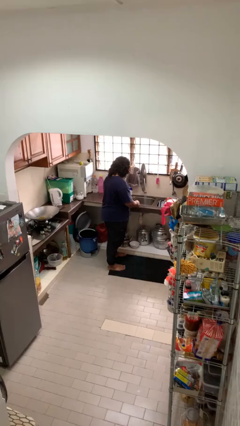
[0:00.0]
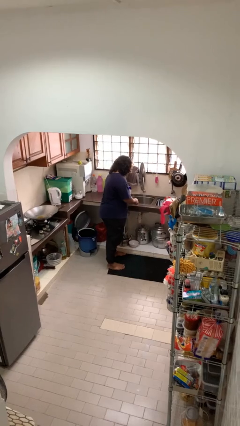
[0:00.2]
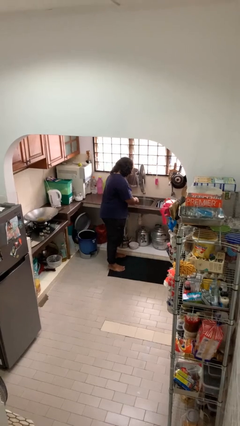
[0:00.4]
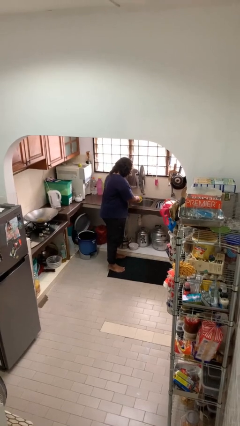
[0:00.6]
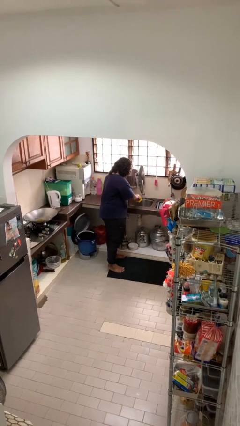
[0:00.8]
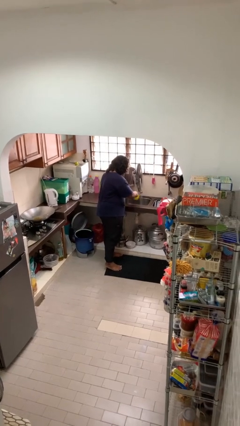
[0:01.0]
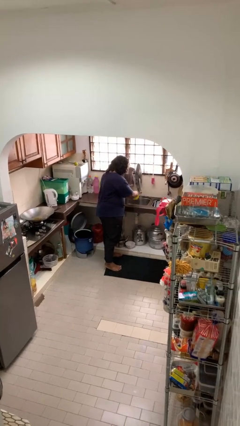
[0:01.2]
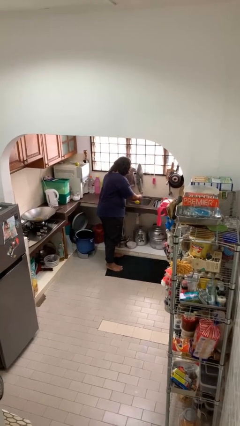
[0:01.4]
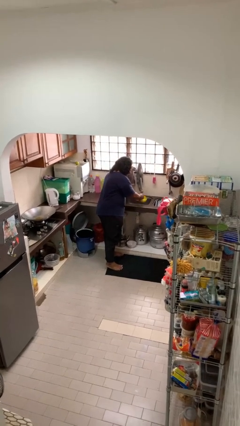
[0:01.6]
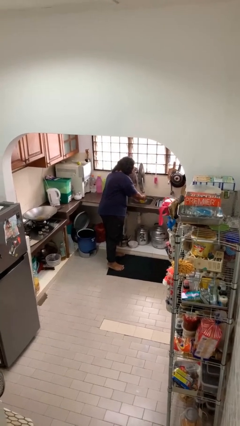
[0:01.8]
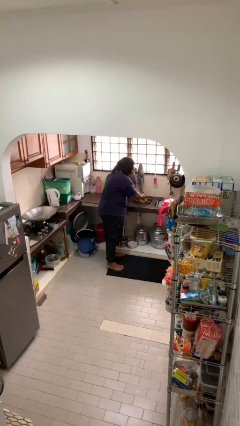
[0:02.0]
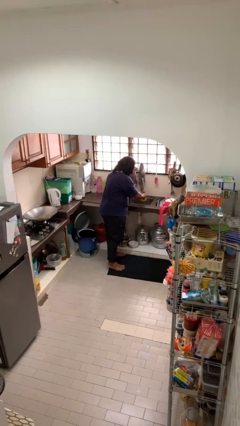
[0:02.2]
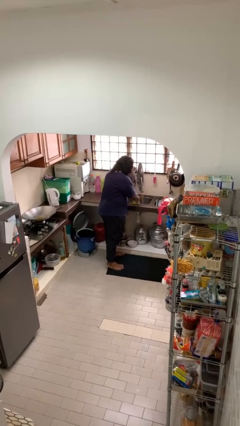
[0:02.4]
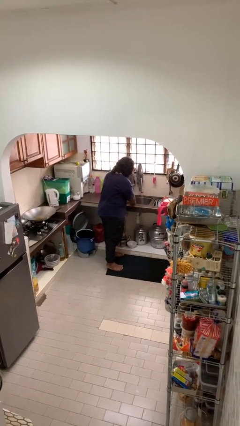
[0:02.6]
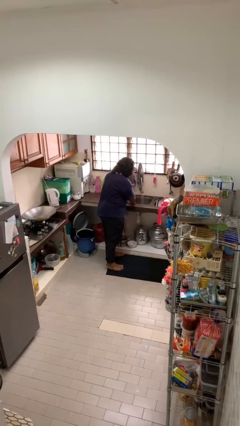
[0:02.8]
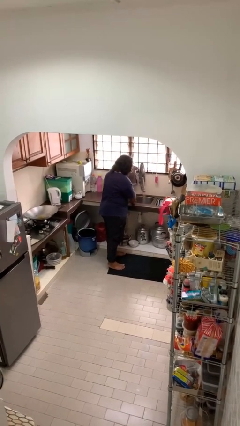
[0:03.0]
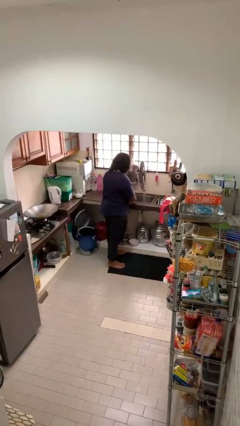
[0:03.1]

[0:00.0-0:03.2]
person washes dish

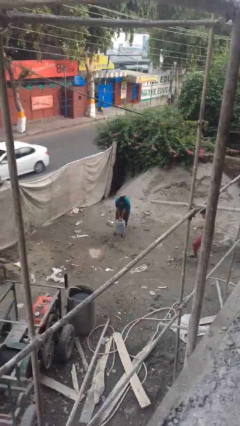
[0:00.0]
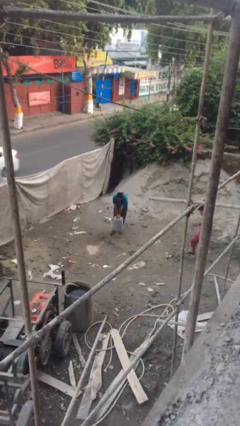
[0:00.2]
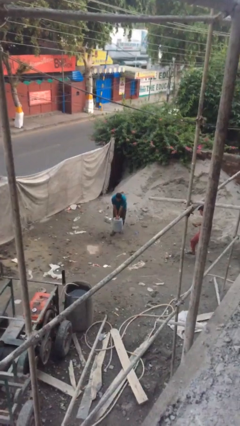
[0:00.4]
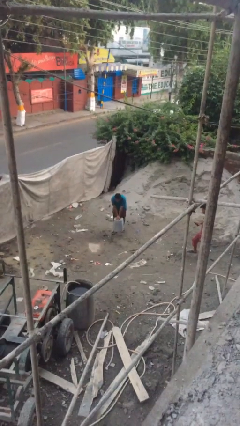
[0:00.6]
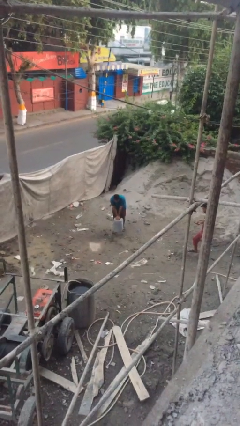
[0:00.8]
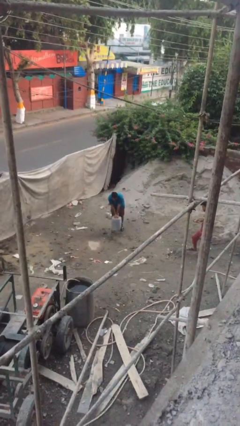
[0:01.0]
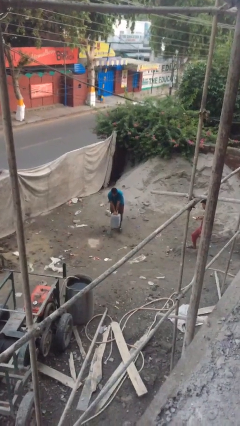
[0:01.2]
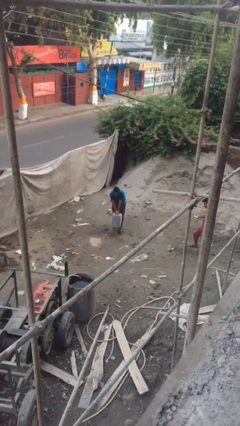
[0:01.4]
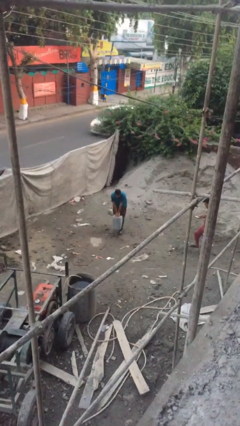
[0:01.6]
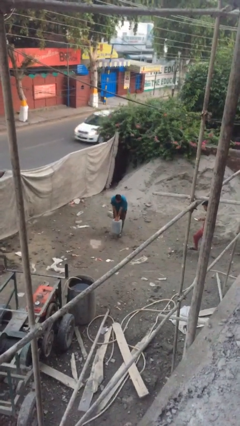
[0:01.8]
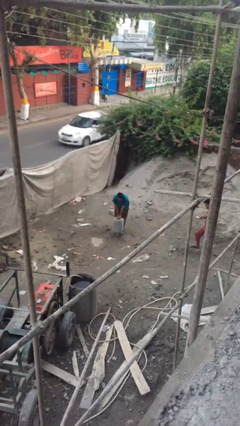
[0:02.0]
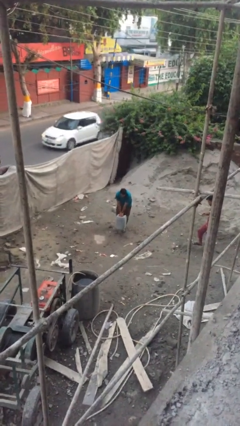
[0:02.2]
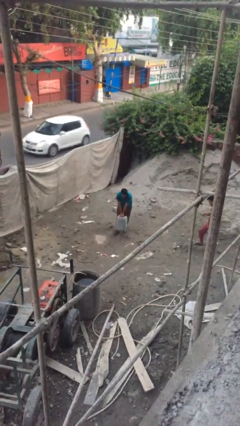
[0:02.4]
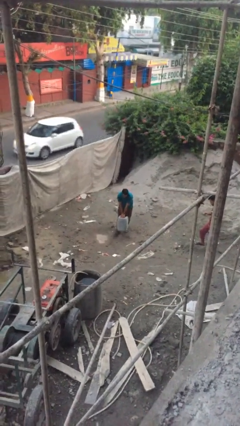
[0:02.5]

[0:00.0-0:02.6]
person carries heavy object

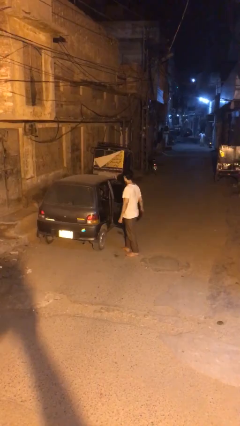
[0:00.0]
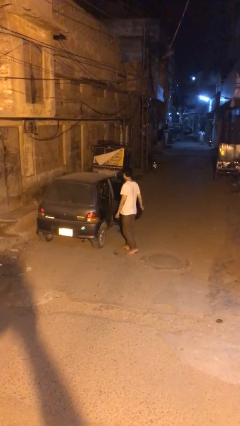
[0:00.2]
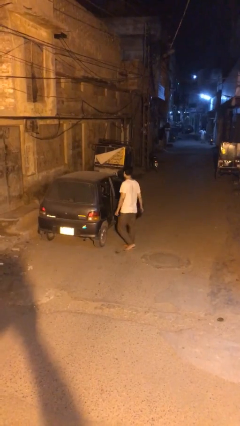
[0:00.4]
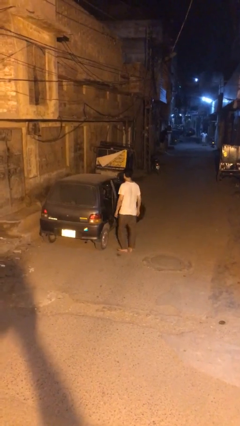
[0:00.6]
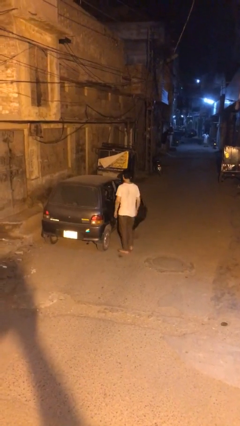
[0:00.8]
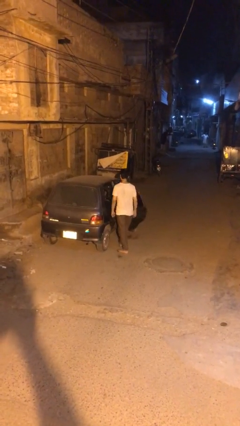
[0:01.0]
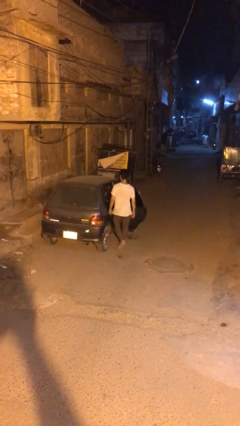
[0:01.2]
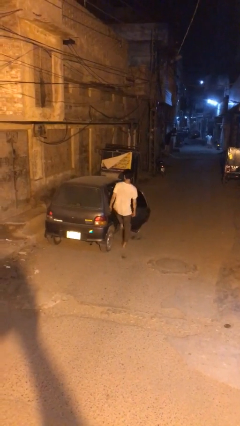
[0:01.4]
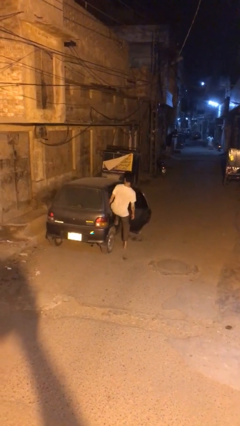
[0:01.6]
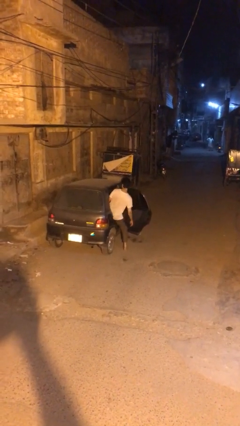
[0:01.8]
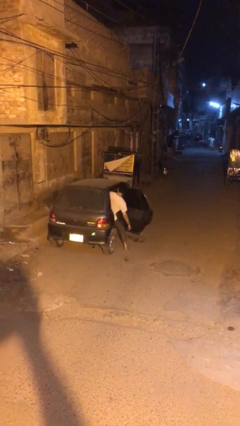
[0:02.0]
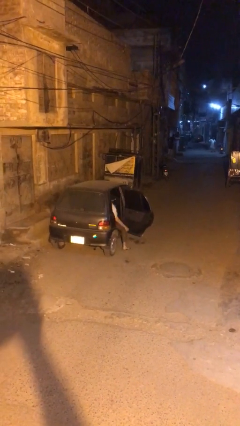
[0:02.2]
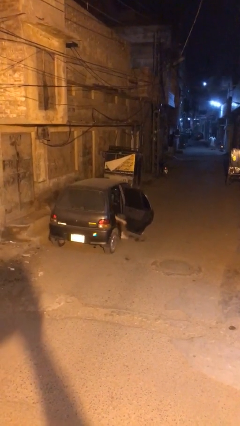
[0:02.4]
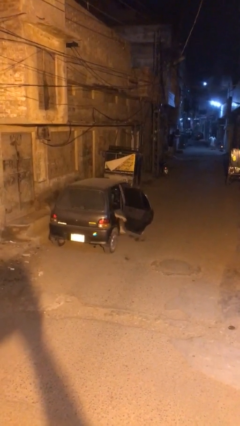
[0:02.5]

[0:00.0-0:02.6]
person enters car

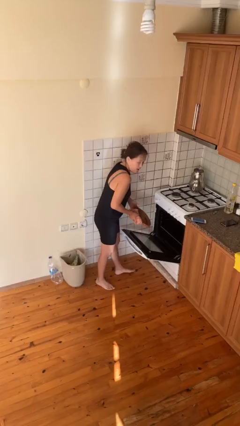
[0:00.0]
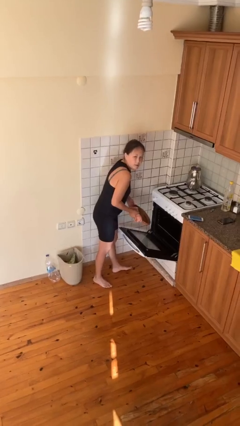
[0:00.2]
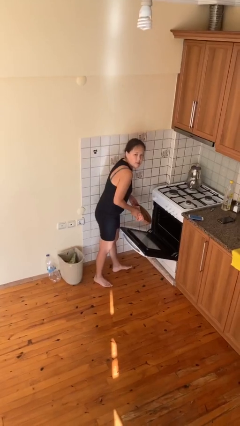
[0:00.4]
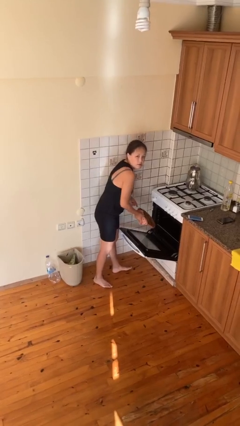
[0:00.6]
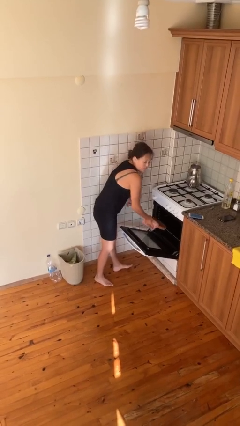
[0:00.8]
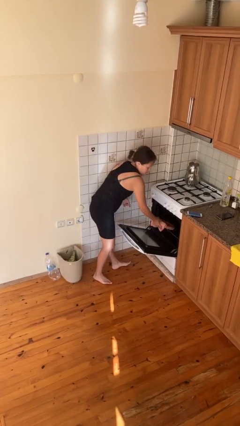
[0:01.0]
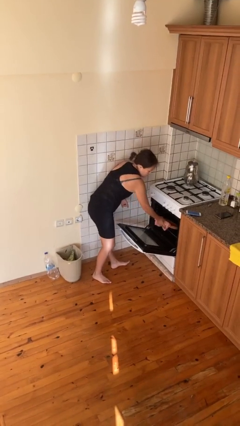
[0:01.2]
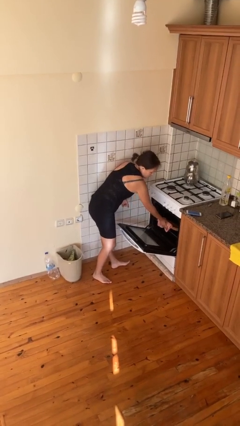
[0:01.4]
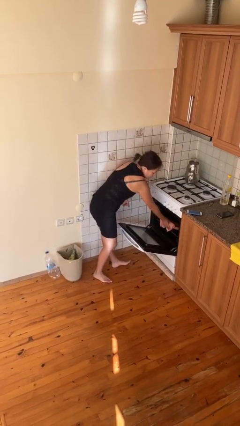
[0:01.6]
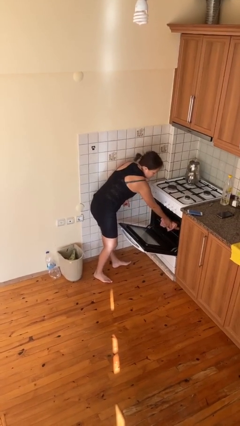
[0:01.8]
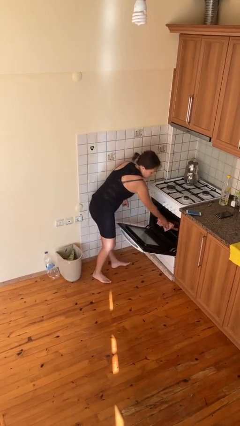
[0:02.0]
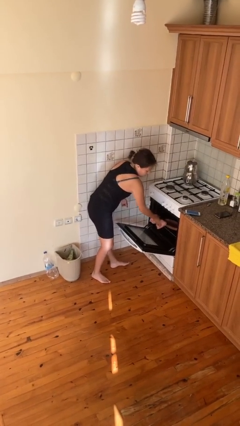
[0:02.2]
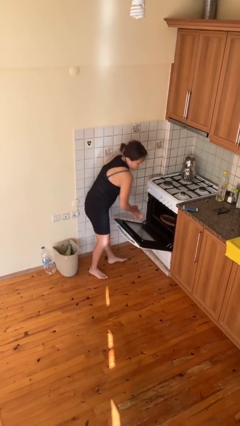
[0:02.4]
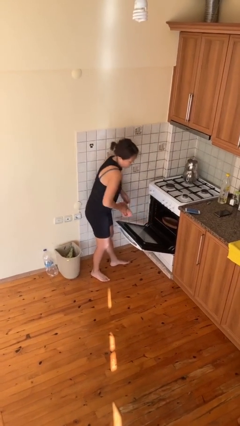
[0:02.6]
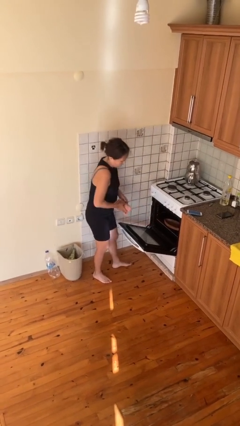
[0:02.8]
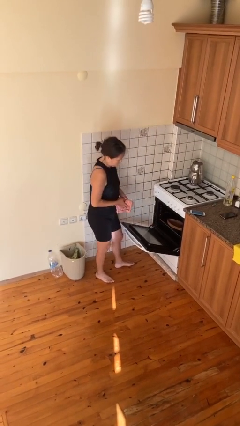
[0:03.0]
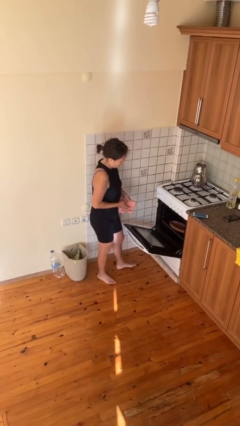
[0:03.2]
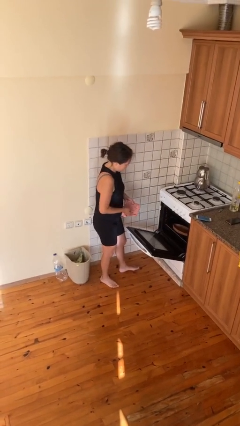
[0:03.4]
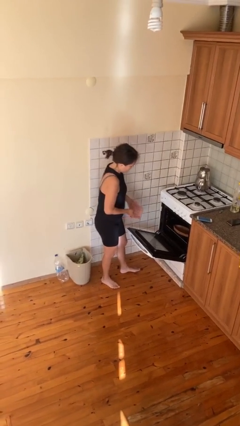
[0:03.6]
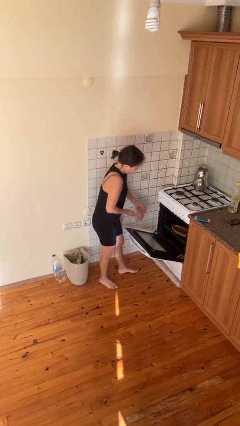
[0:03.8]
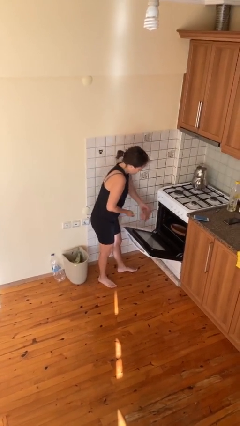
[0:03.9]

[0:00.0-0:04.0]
person puts object into oven

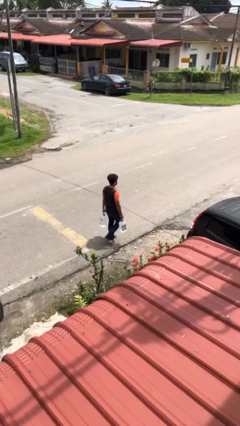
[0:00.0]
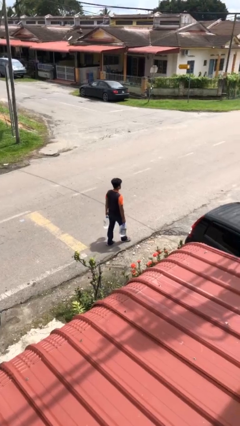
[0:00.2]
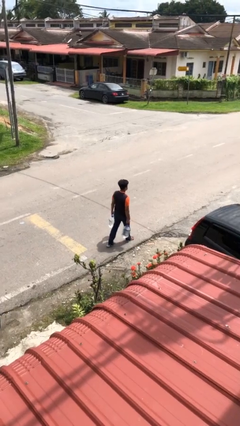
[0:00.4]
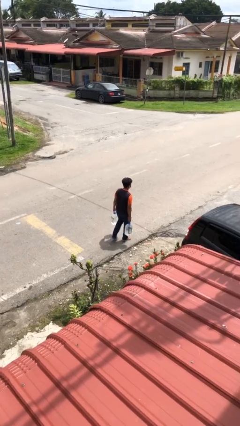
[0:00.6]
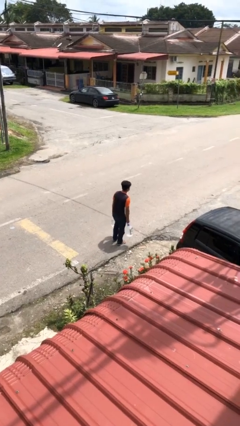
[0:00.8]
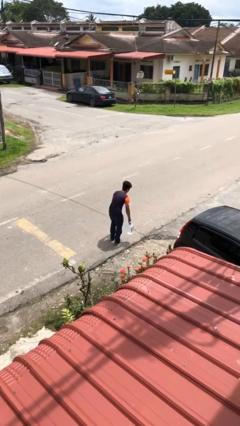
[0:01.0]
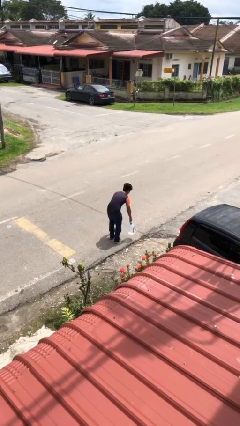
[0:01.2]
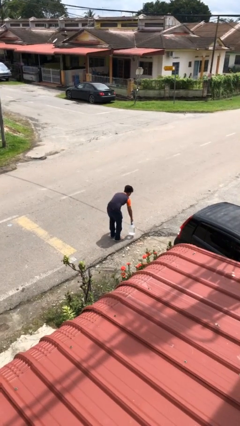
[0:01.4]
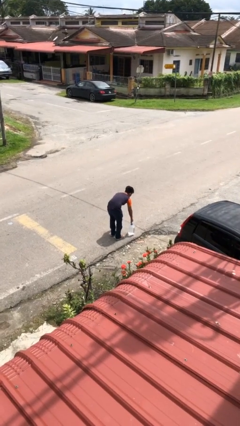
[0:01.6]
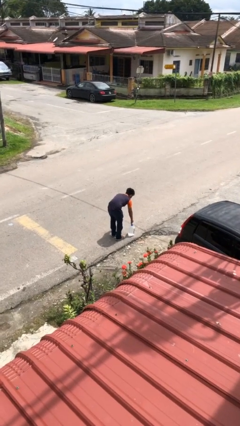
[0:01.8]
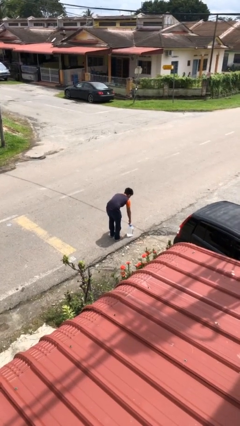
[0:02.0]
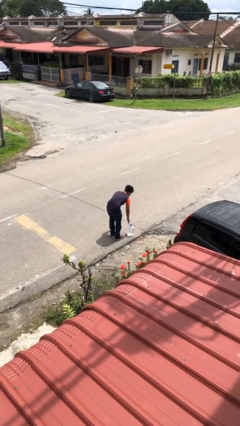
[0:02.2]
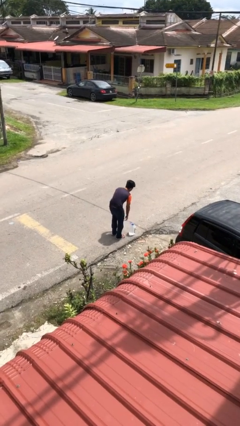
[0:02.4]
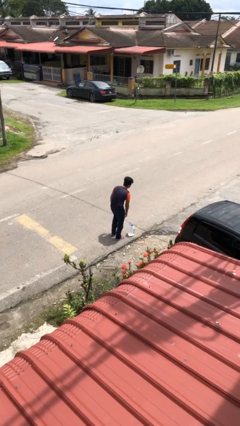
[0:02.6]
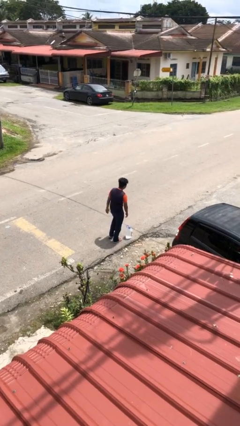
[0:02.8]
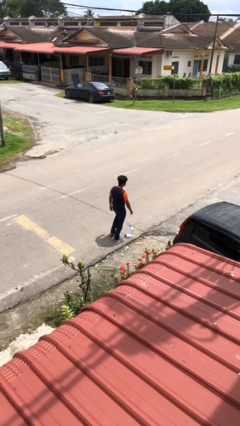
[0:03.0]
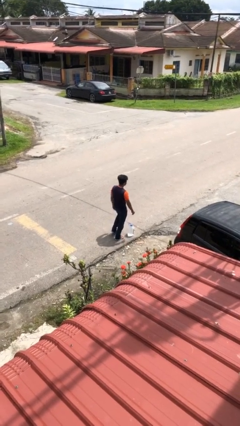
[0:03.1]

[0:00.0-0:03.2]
person puts down object on floor

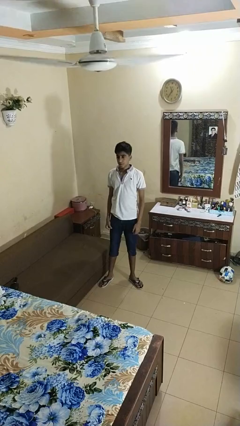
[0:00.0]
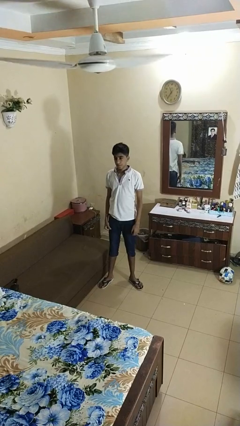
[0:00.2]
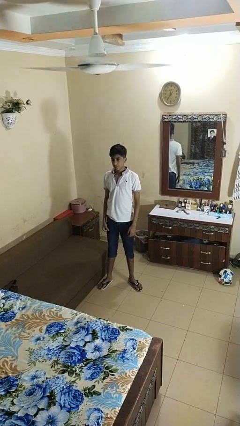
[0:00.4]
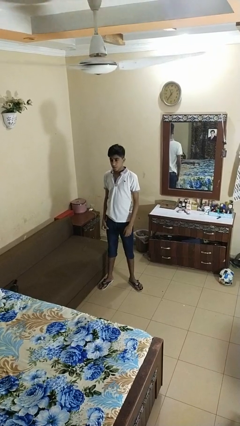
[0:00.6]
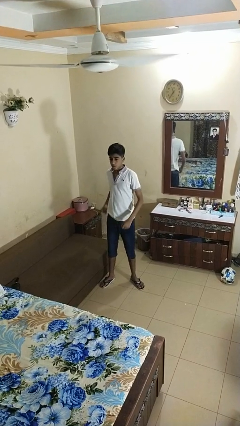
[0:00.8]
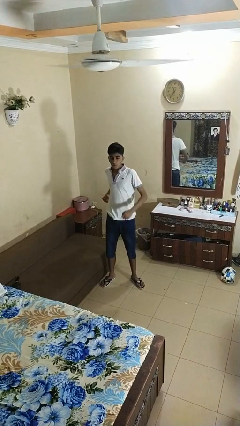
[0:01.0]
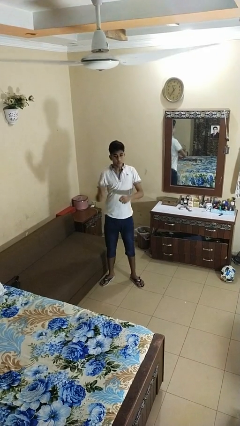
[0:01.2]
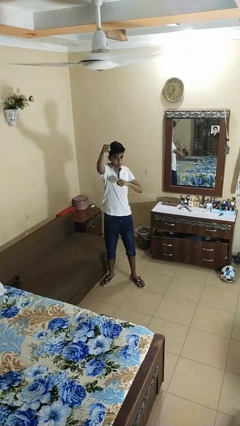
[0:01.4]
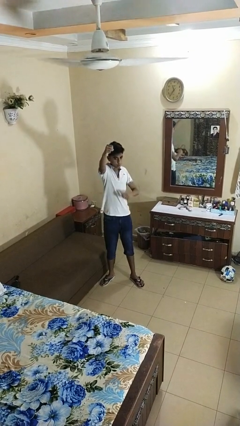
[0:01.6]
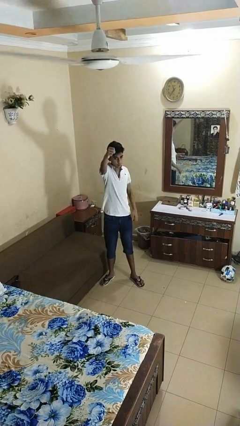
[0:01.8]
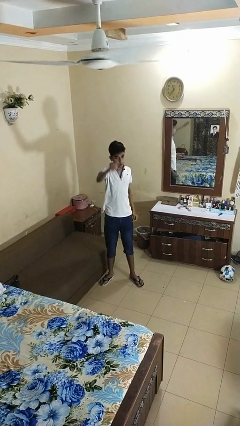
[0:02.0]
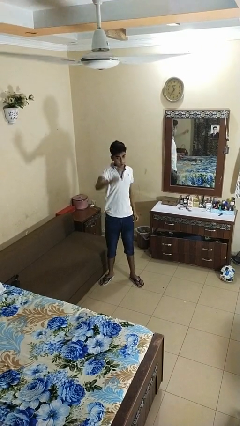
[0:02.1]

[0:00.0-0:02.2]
person punches
